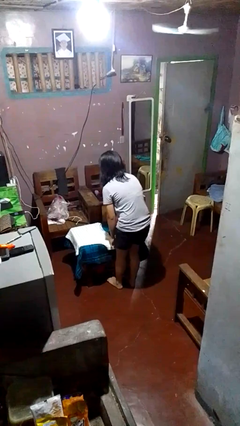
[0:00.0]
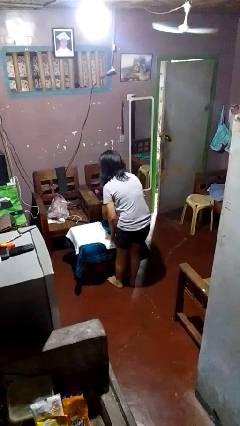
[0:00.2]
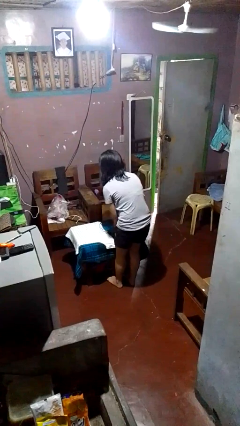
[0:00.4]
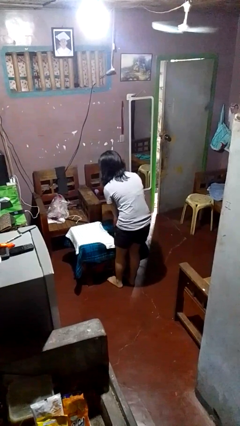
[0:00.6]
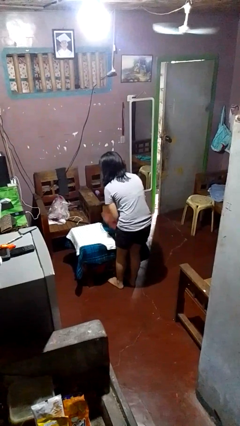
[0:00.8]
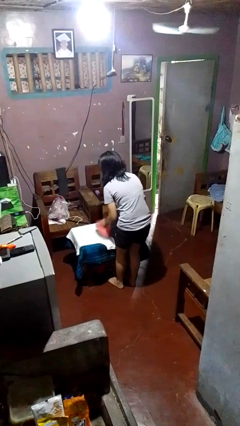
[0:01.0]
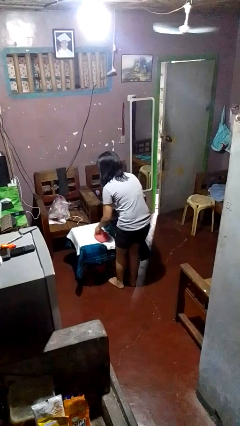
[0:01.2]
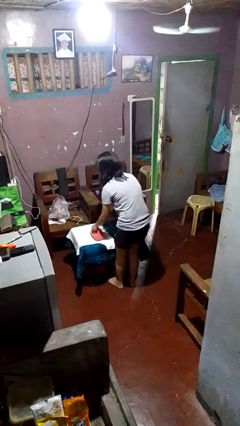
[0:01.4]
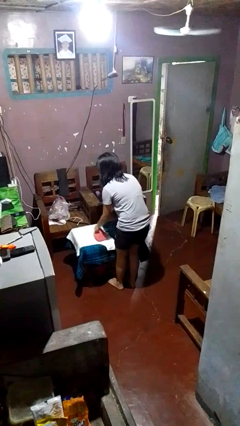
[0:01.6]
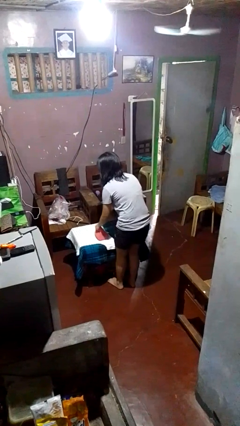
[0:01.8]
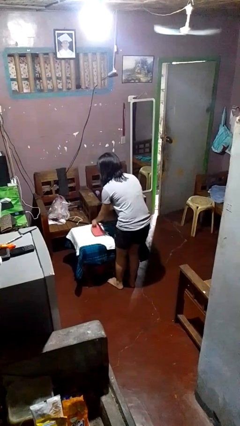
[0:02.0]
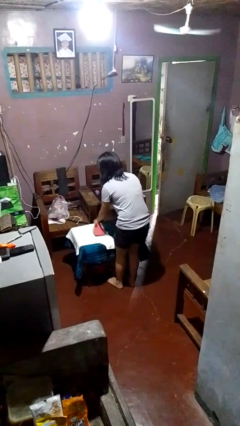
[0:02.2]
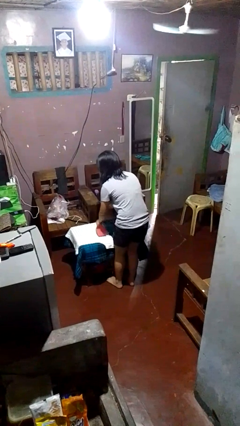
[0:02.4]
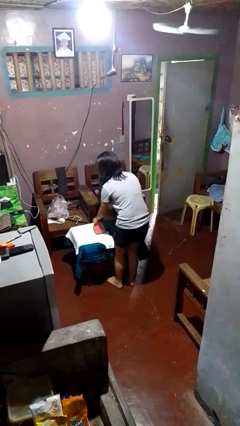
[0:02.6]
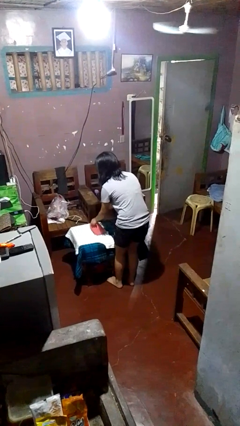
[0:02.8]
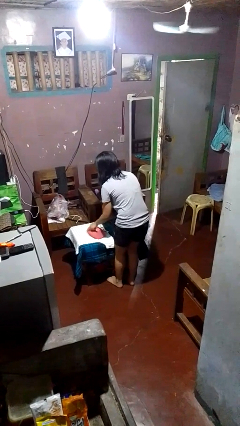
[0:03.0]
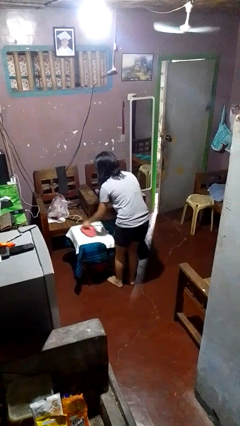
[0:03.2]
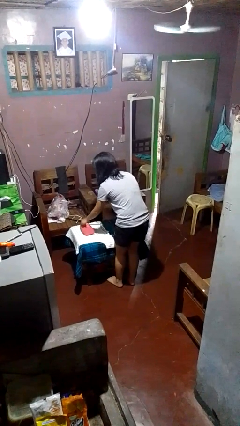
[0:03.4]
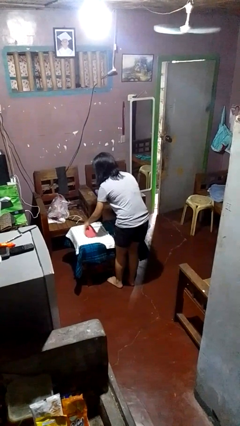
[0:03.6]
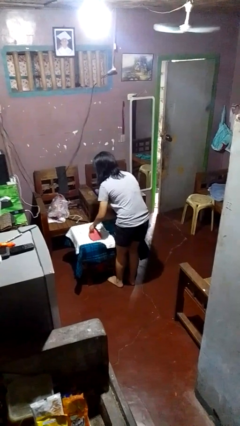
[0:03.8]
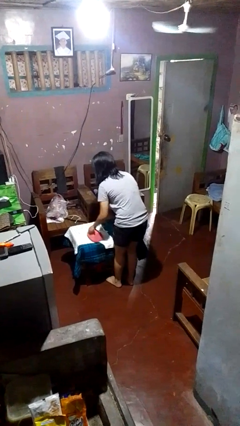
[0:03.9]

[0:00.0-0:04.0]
person irons clothes

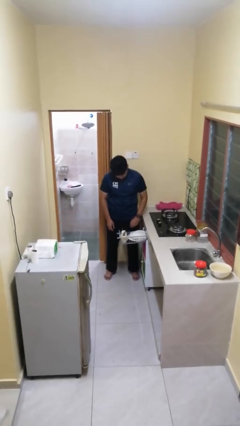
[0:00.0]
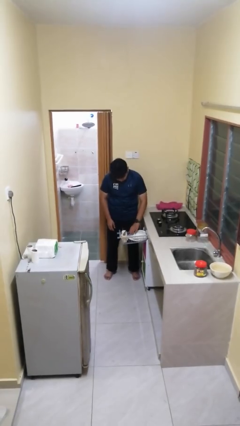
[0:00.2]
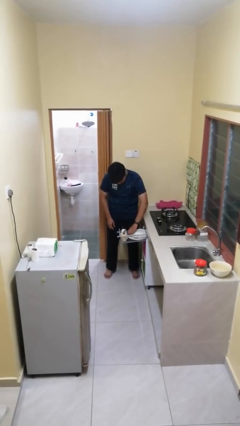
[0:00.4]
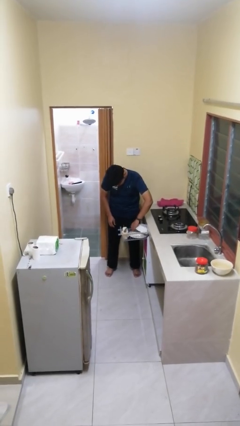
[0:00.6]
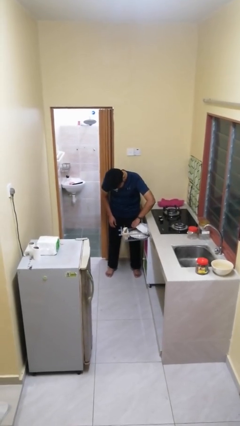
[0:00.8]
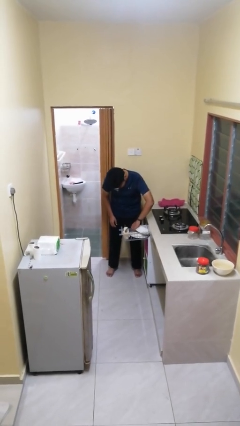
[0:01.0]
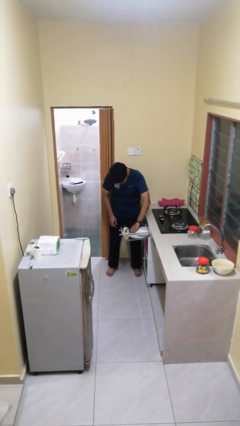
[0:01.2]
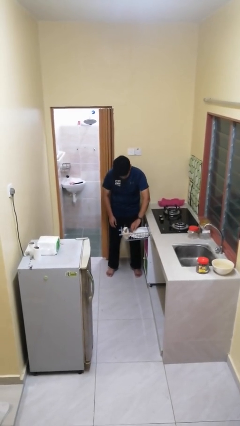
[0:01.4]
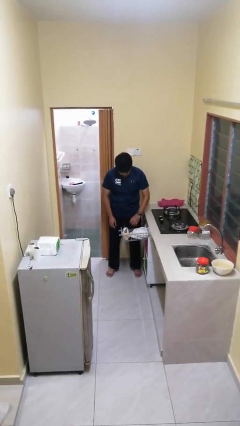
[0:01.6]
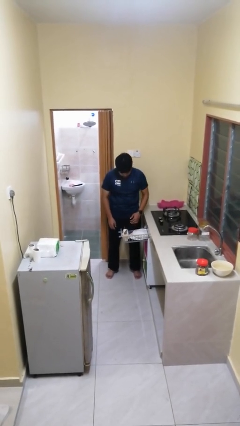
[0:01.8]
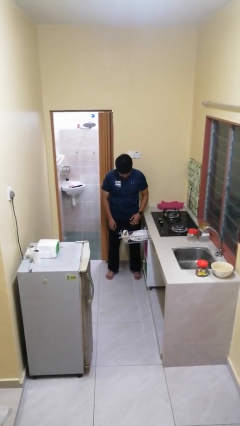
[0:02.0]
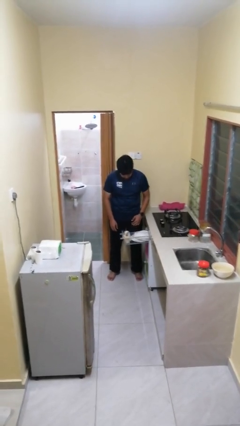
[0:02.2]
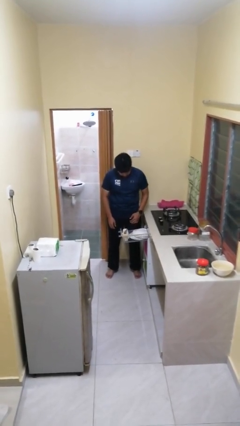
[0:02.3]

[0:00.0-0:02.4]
person searches in kitchen drawer

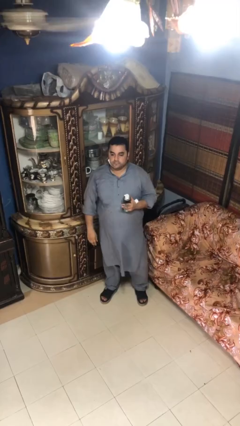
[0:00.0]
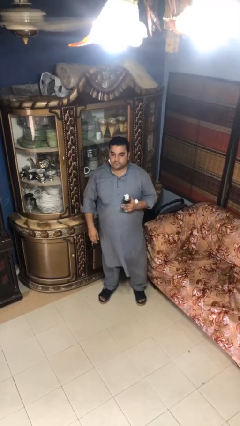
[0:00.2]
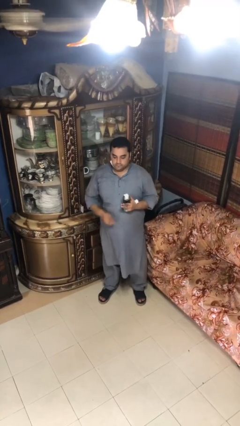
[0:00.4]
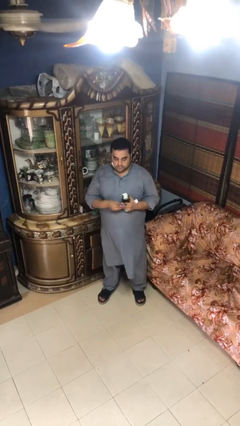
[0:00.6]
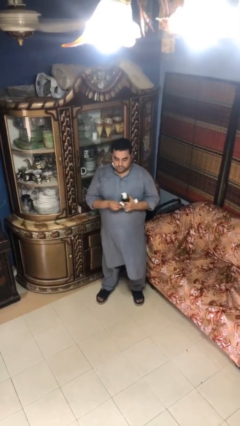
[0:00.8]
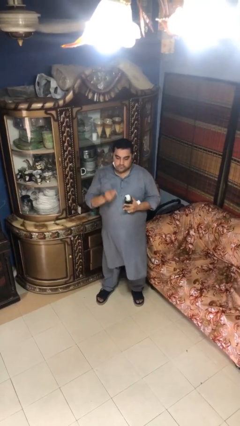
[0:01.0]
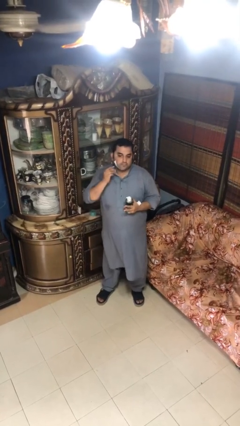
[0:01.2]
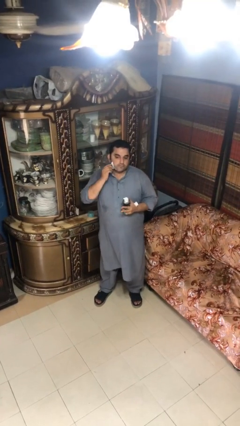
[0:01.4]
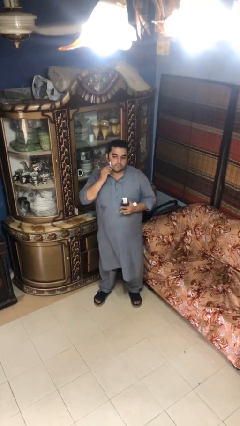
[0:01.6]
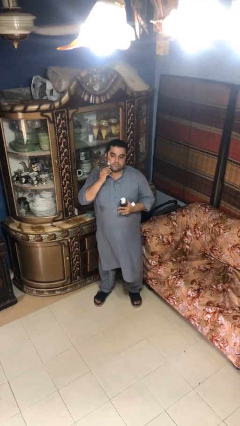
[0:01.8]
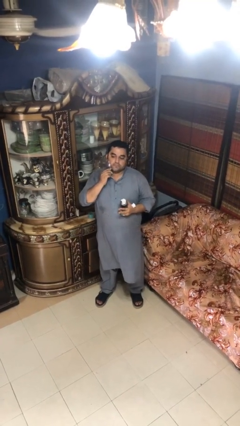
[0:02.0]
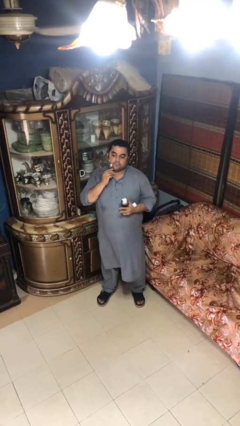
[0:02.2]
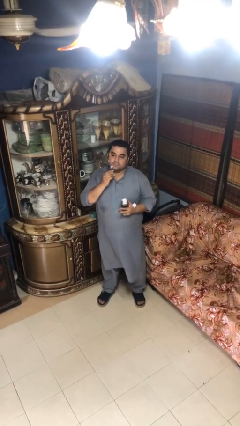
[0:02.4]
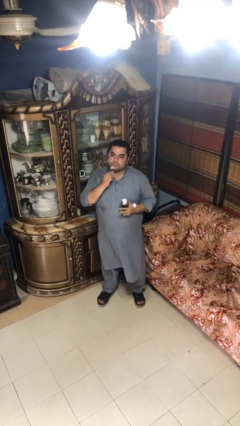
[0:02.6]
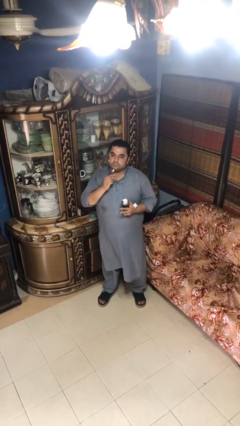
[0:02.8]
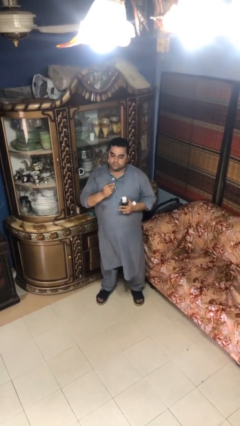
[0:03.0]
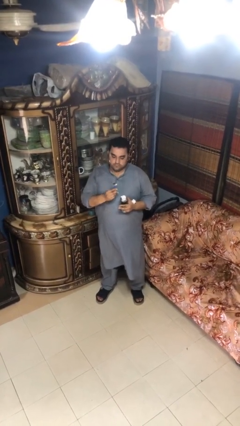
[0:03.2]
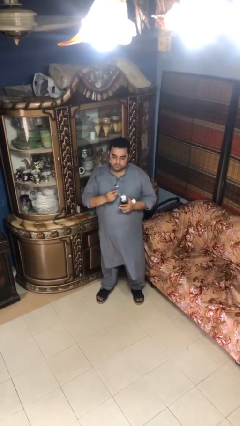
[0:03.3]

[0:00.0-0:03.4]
person shaves face

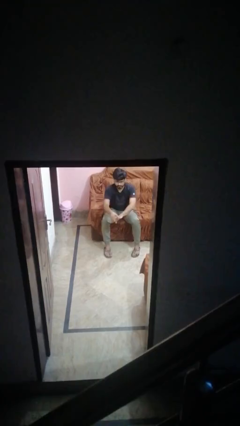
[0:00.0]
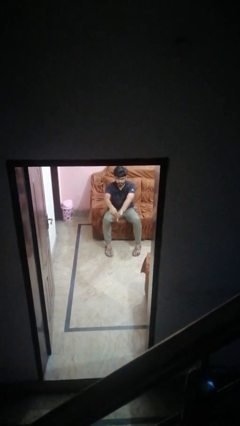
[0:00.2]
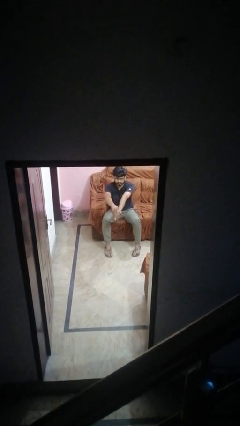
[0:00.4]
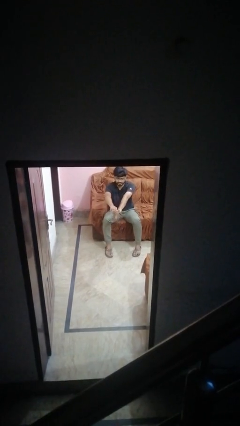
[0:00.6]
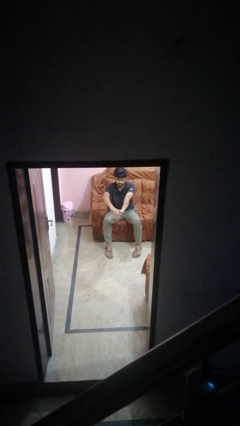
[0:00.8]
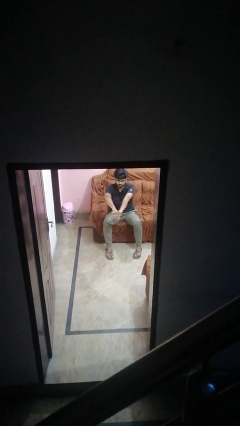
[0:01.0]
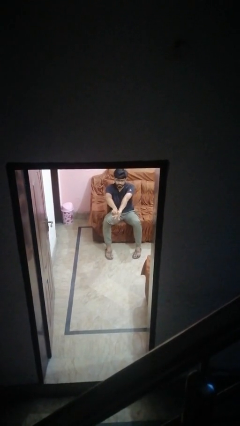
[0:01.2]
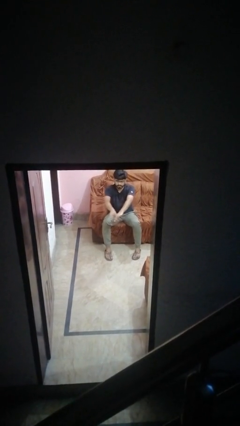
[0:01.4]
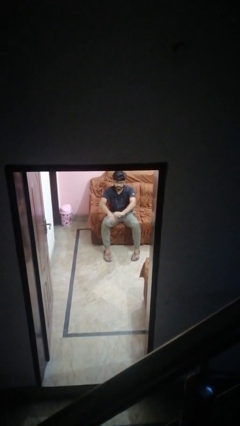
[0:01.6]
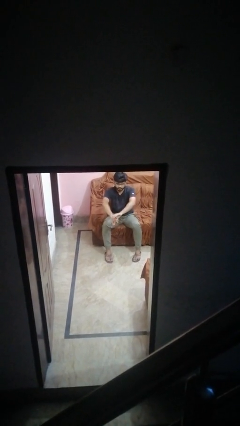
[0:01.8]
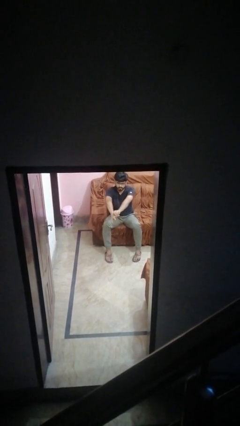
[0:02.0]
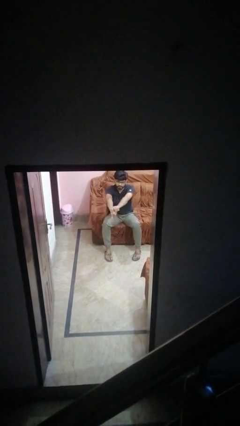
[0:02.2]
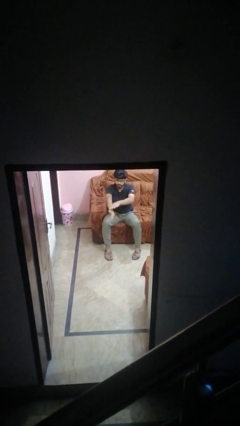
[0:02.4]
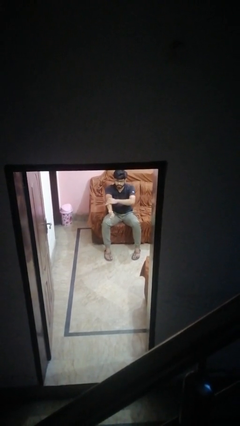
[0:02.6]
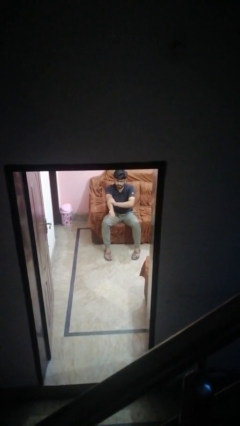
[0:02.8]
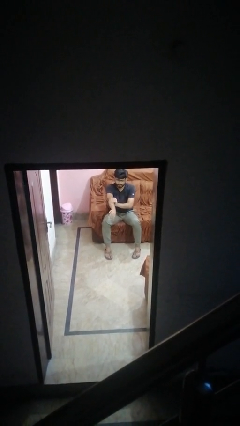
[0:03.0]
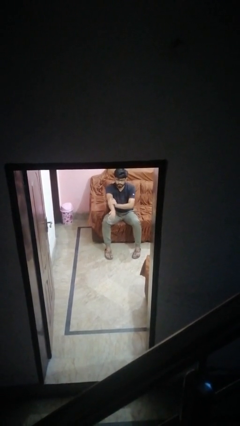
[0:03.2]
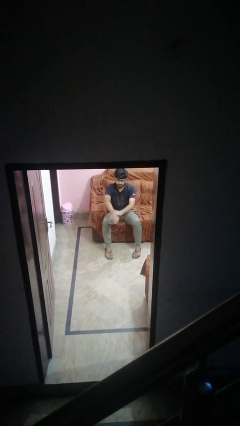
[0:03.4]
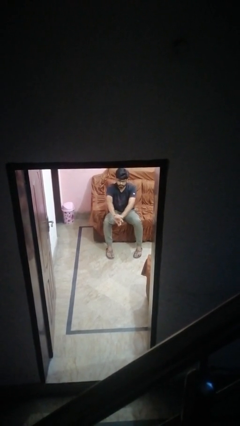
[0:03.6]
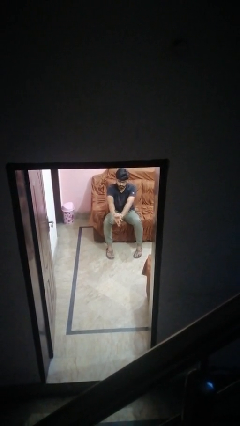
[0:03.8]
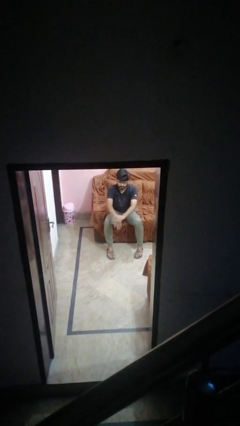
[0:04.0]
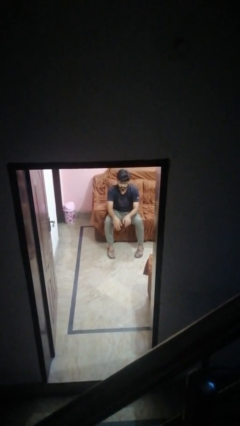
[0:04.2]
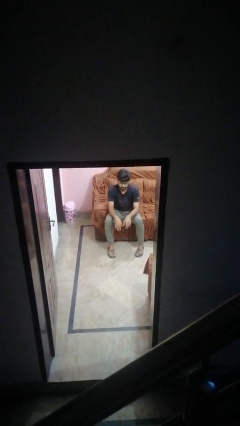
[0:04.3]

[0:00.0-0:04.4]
person cracks knuckles

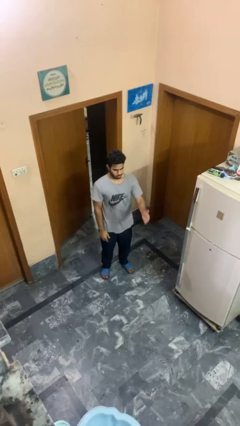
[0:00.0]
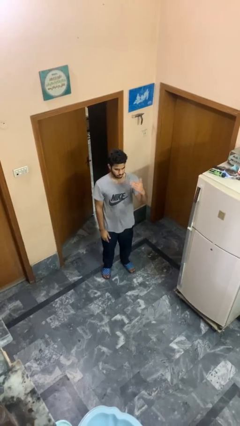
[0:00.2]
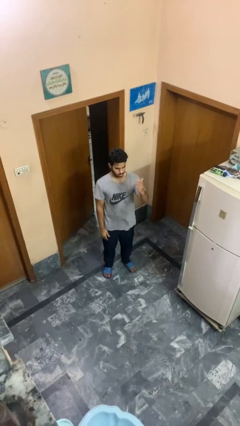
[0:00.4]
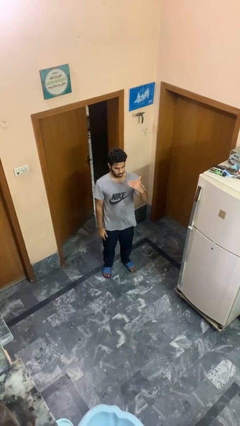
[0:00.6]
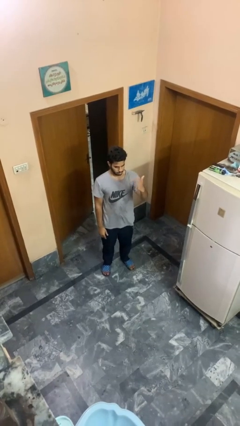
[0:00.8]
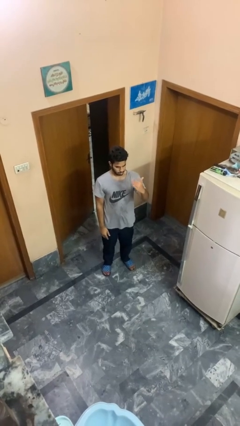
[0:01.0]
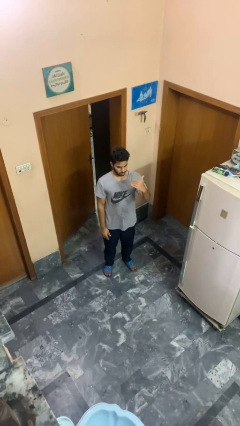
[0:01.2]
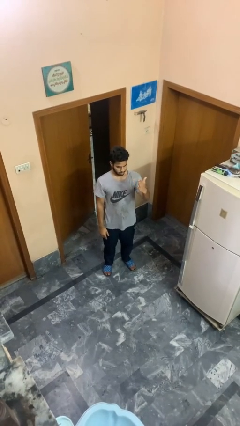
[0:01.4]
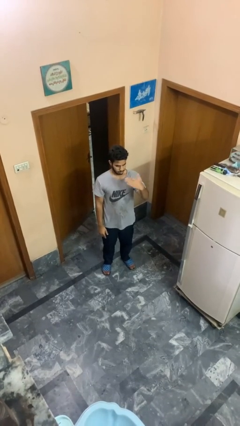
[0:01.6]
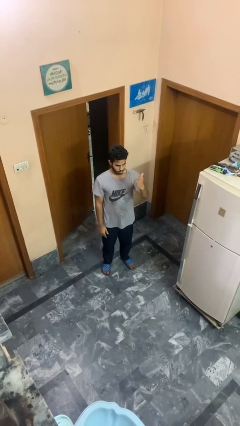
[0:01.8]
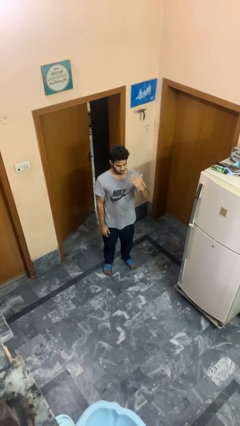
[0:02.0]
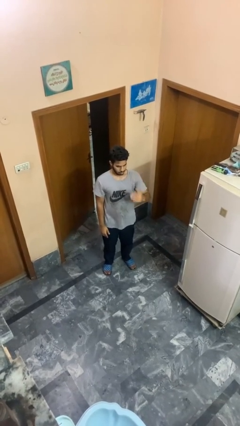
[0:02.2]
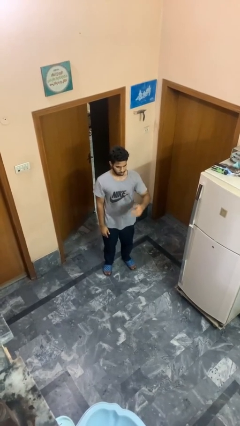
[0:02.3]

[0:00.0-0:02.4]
person gestures come here

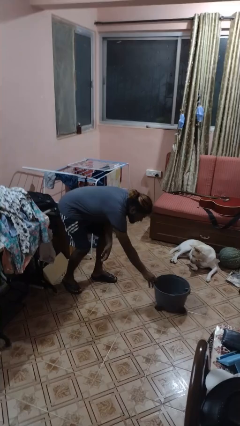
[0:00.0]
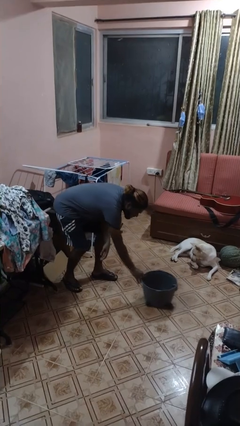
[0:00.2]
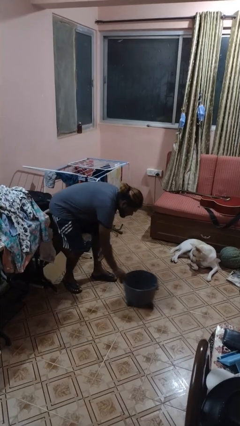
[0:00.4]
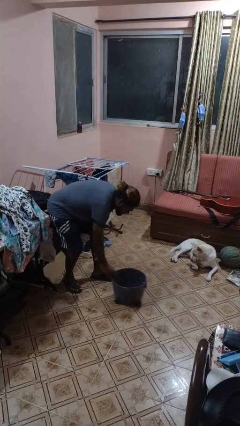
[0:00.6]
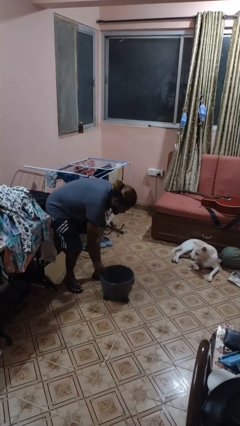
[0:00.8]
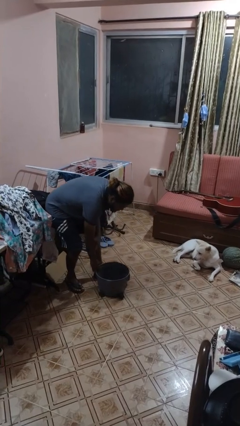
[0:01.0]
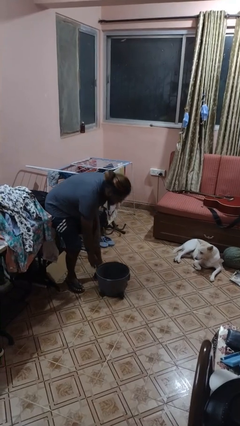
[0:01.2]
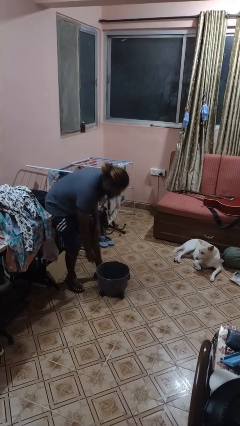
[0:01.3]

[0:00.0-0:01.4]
person pulls wheeled cart
